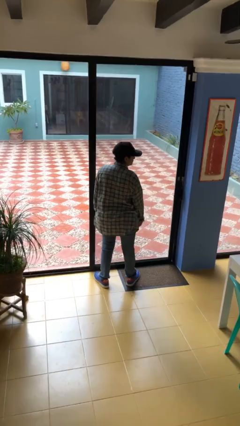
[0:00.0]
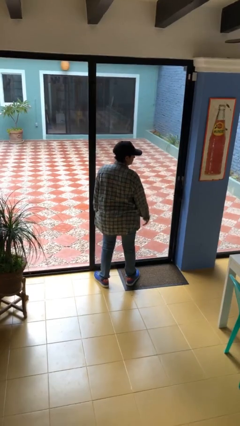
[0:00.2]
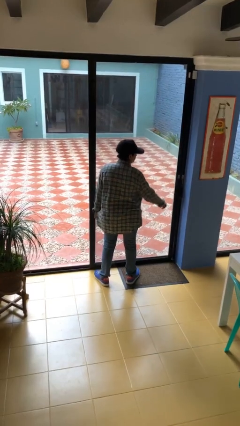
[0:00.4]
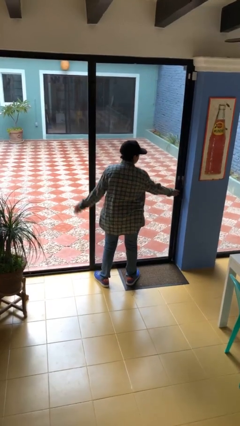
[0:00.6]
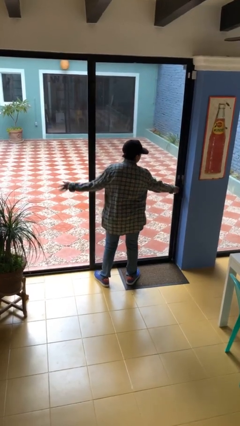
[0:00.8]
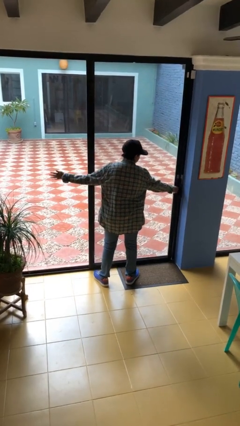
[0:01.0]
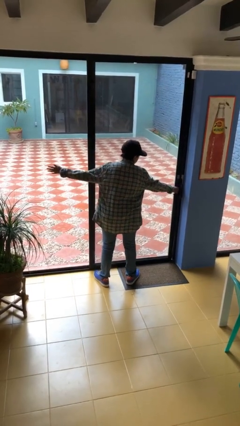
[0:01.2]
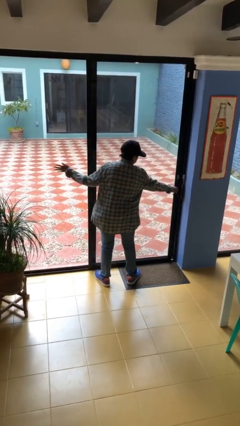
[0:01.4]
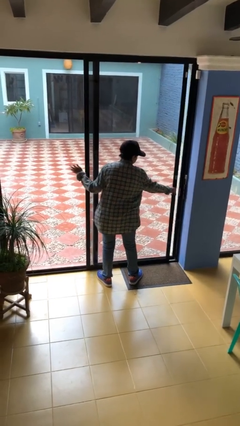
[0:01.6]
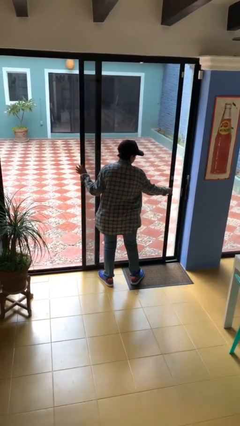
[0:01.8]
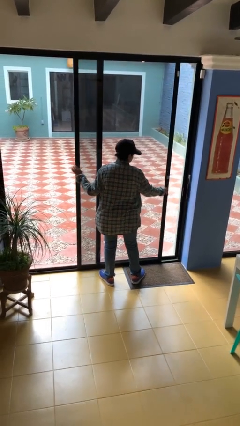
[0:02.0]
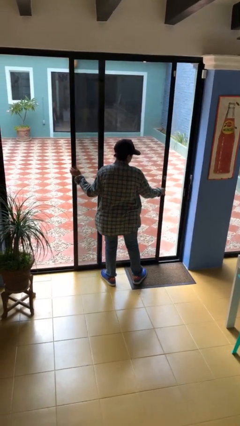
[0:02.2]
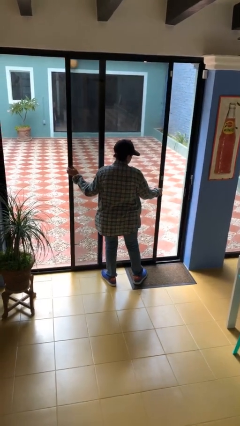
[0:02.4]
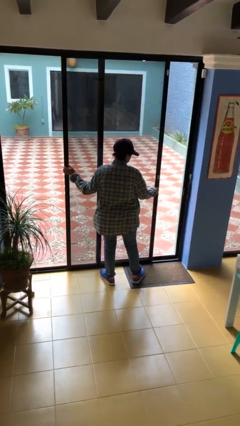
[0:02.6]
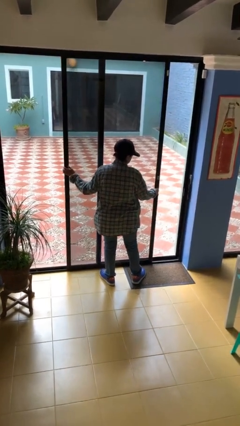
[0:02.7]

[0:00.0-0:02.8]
person opens sliding door

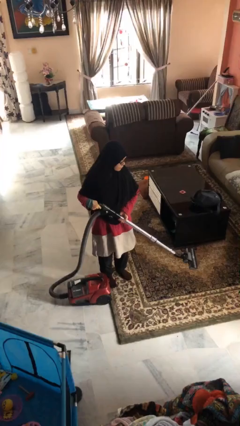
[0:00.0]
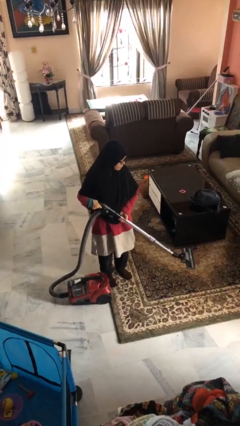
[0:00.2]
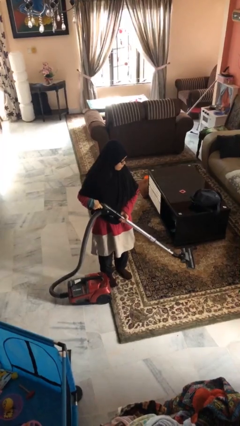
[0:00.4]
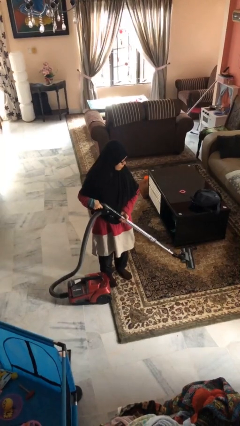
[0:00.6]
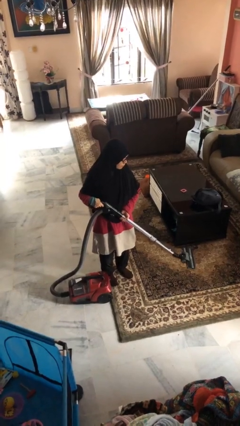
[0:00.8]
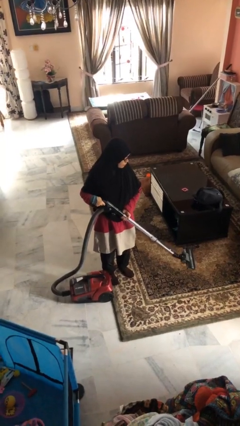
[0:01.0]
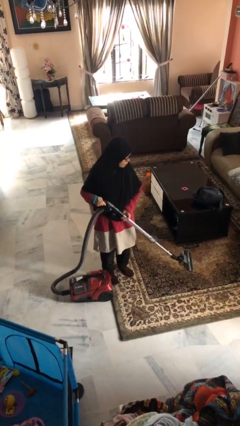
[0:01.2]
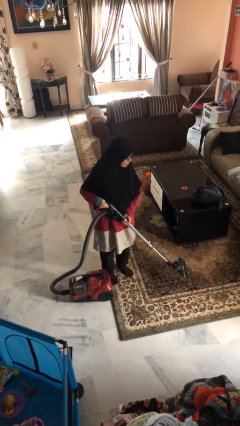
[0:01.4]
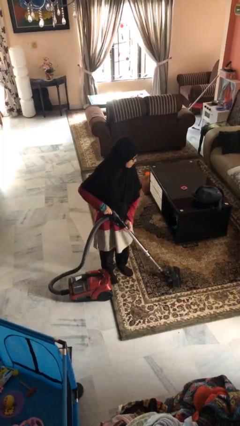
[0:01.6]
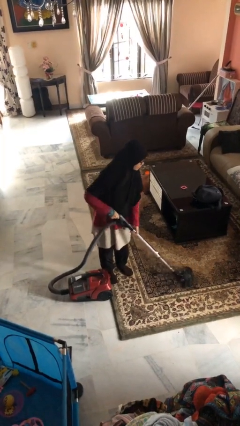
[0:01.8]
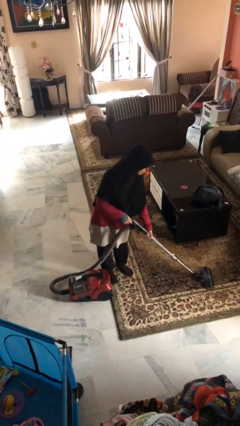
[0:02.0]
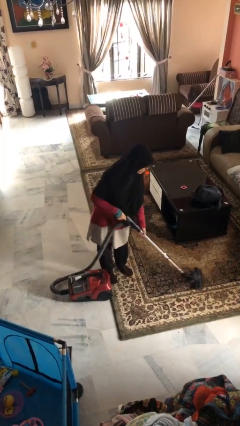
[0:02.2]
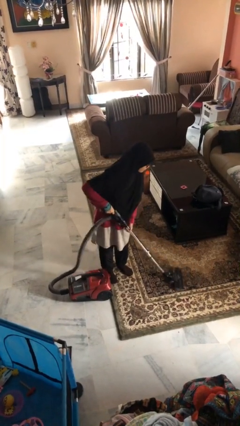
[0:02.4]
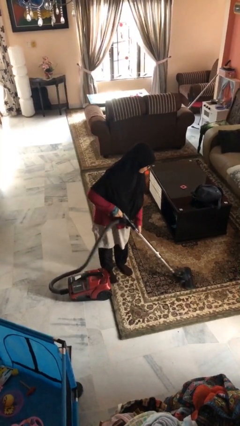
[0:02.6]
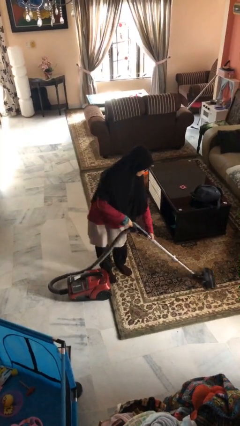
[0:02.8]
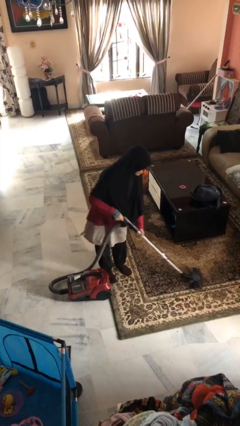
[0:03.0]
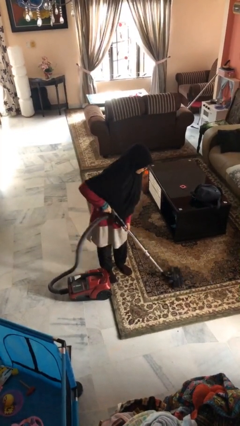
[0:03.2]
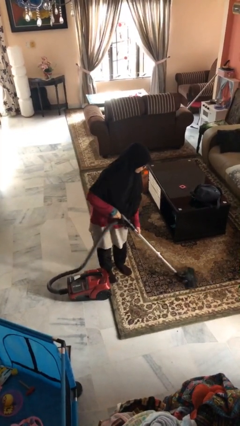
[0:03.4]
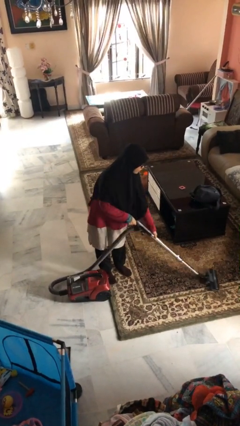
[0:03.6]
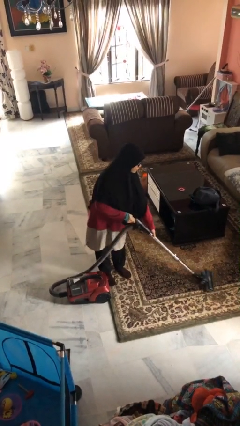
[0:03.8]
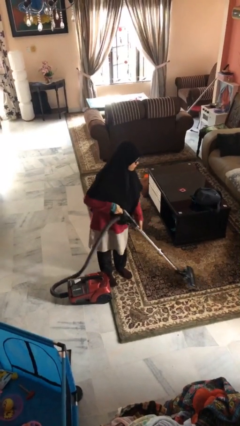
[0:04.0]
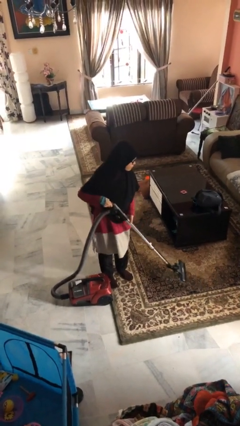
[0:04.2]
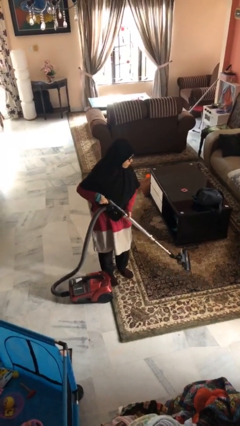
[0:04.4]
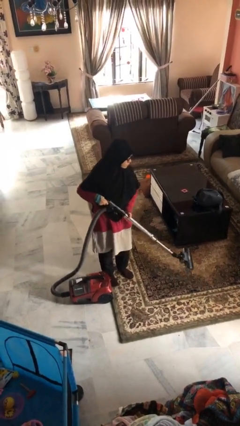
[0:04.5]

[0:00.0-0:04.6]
person vacuums carpet

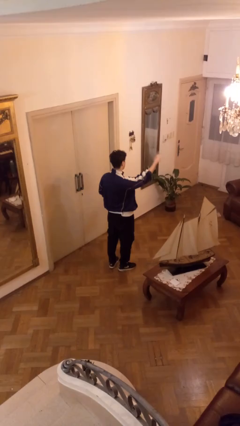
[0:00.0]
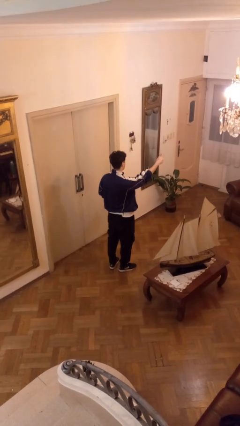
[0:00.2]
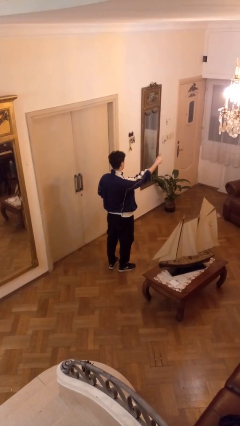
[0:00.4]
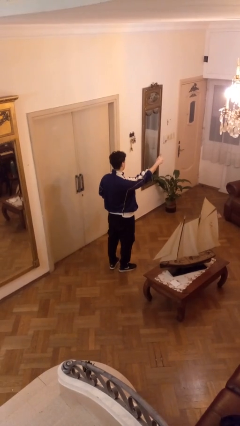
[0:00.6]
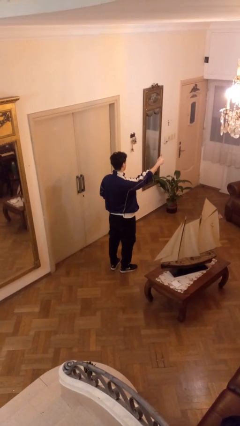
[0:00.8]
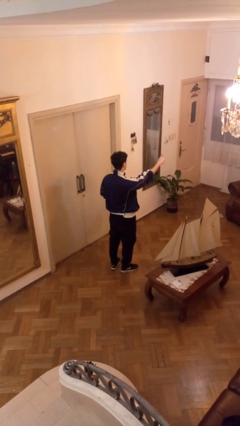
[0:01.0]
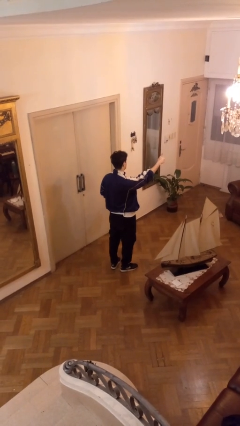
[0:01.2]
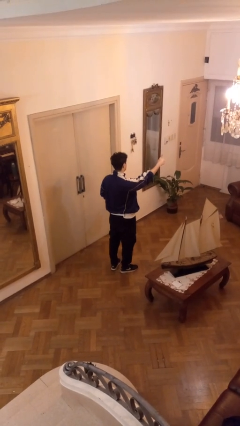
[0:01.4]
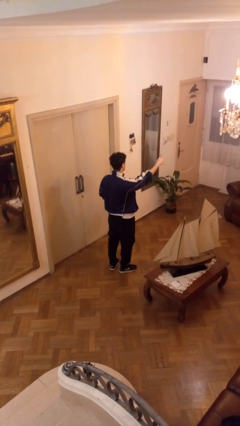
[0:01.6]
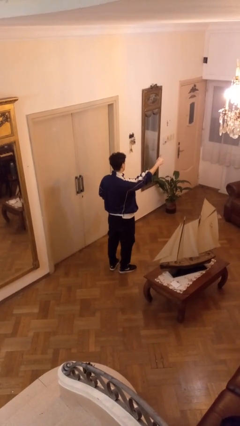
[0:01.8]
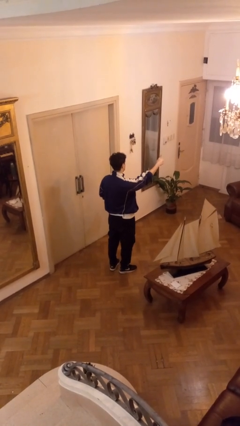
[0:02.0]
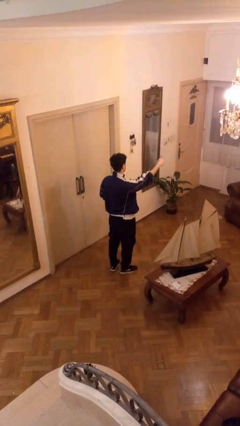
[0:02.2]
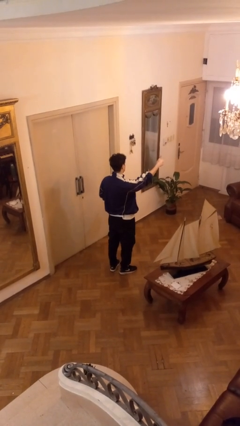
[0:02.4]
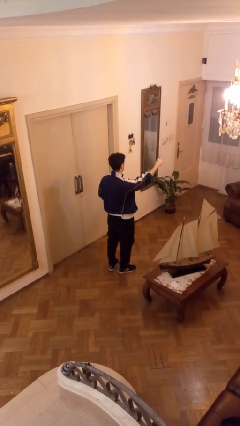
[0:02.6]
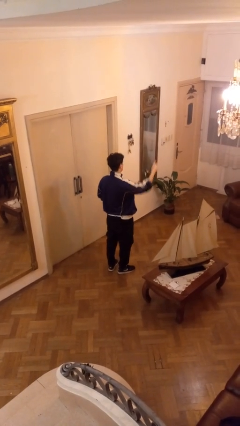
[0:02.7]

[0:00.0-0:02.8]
person gestures thumbs up

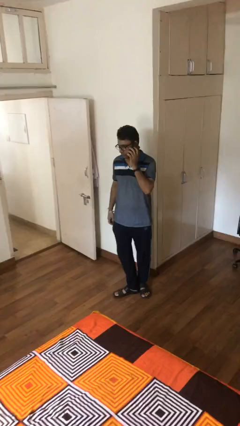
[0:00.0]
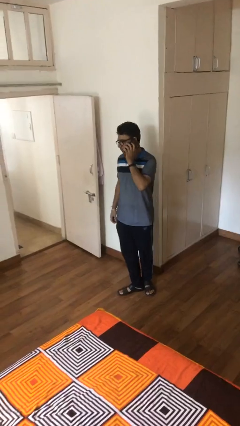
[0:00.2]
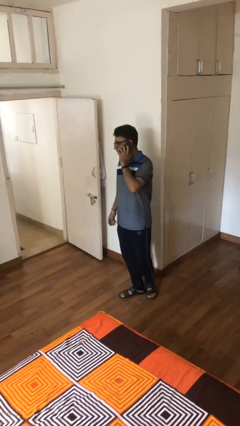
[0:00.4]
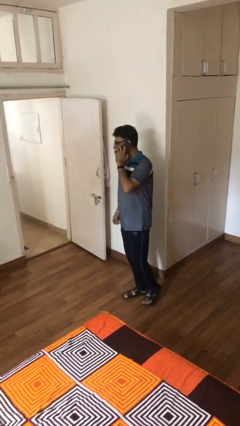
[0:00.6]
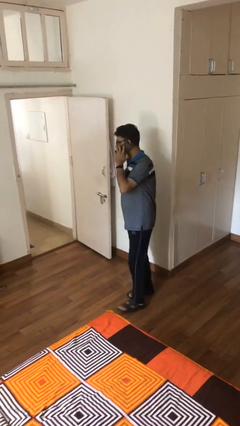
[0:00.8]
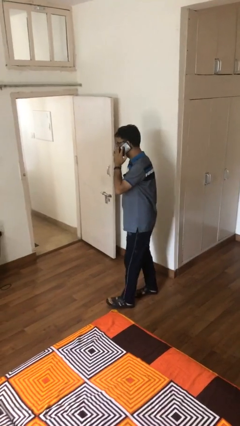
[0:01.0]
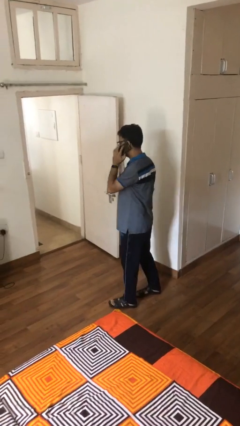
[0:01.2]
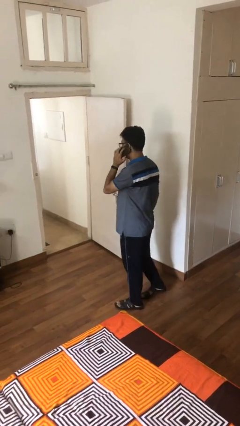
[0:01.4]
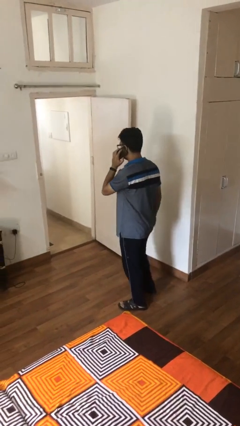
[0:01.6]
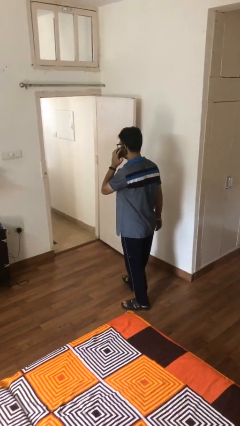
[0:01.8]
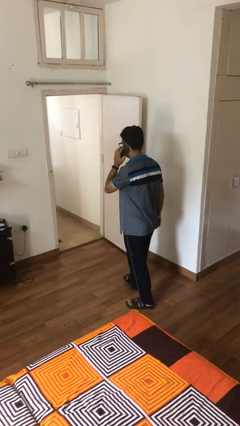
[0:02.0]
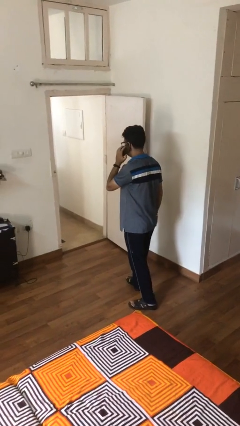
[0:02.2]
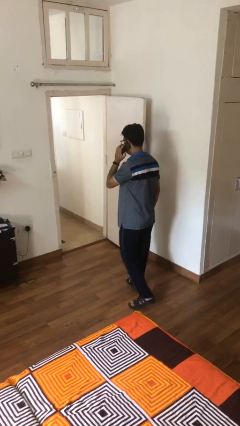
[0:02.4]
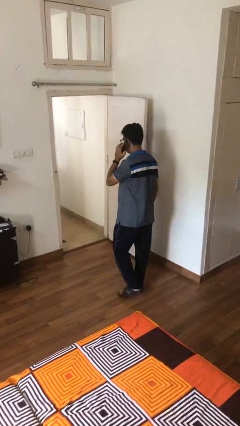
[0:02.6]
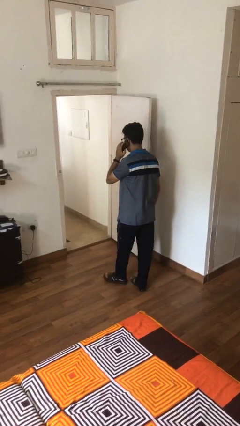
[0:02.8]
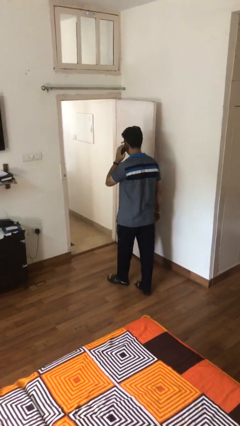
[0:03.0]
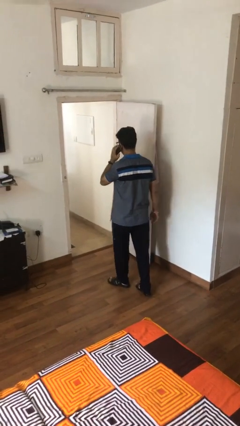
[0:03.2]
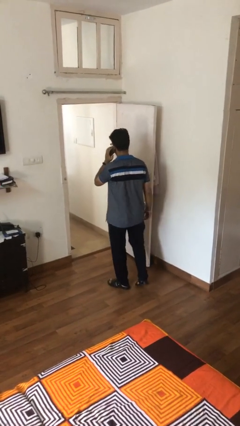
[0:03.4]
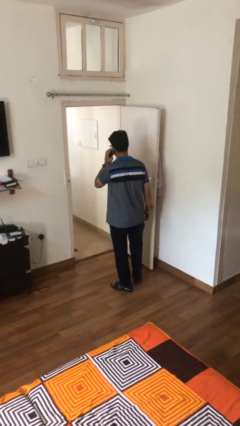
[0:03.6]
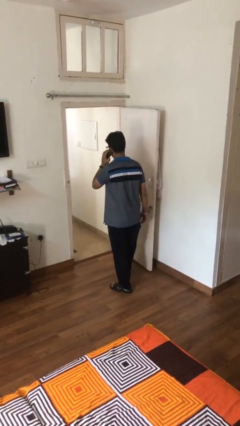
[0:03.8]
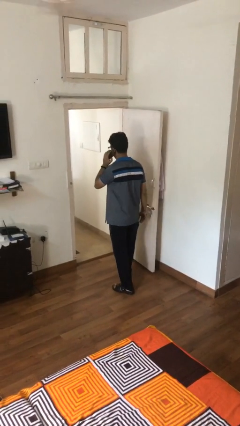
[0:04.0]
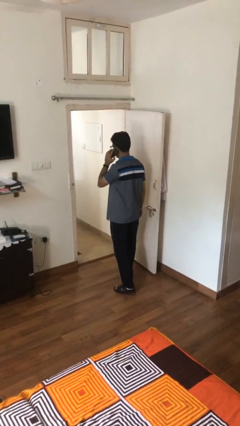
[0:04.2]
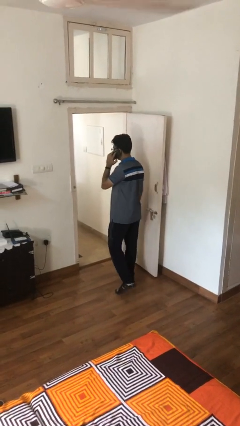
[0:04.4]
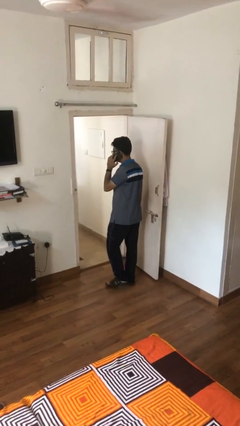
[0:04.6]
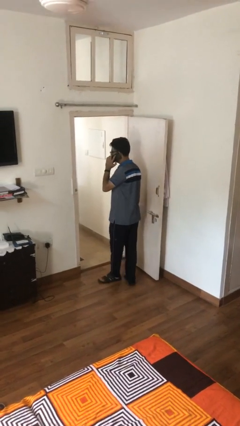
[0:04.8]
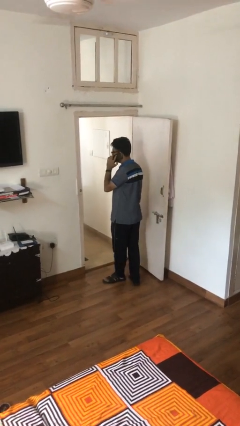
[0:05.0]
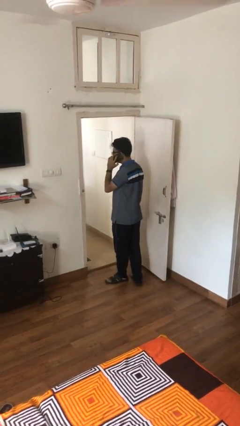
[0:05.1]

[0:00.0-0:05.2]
person talks on phone

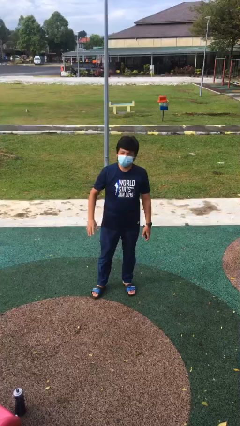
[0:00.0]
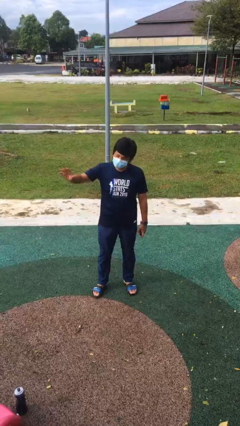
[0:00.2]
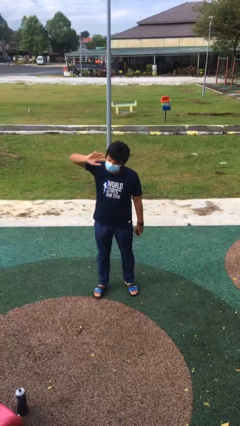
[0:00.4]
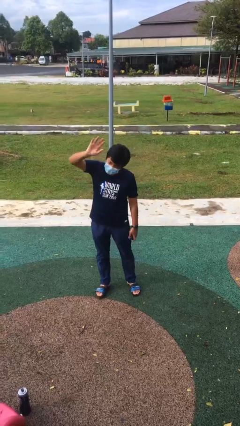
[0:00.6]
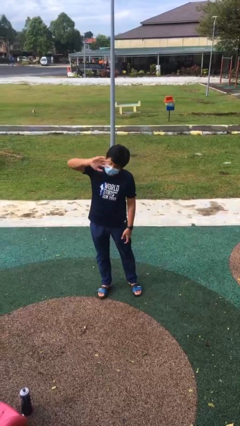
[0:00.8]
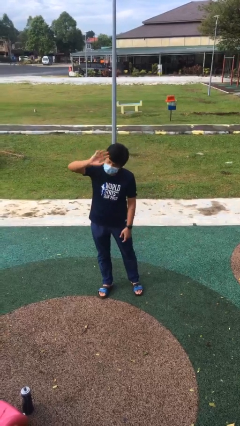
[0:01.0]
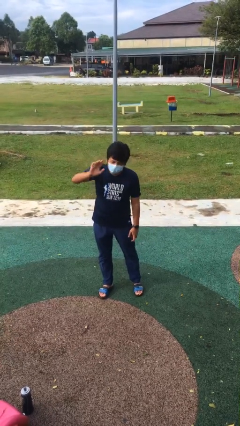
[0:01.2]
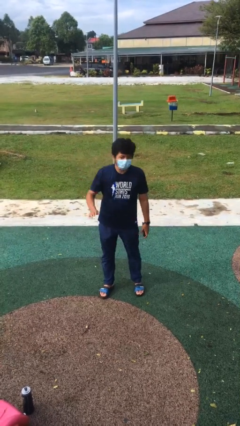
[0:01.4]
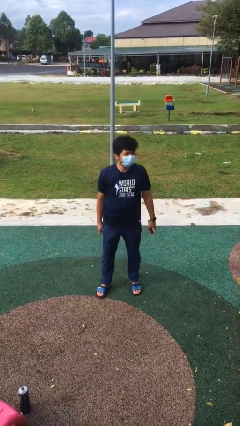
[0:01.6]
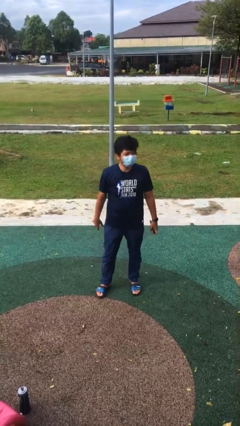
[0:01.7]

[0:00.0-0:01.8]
person waves at person

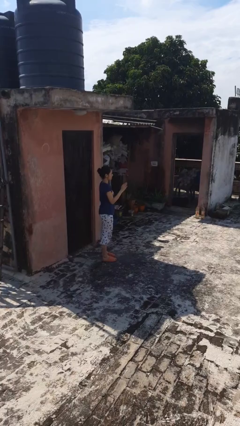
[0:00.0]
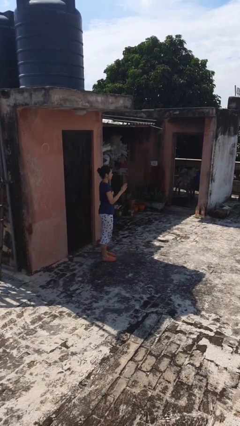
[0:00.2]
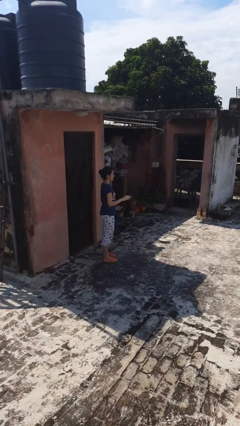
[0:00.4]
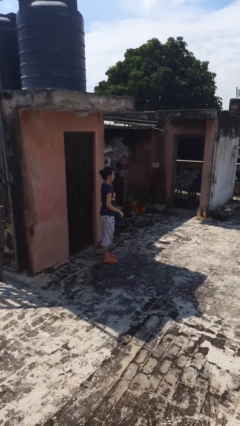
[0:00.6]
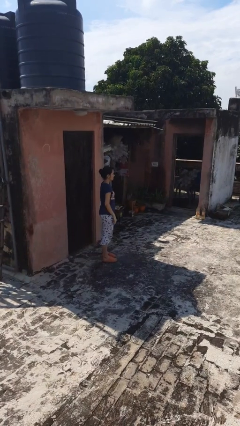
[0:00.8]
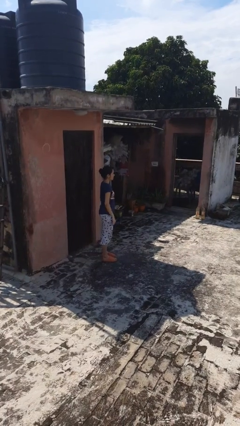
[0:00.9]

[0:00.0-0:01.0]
person gestures swipe right
